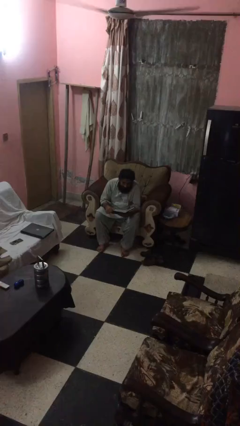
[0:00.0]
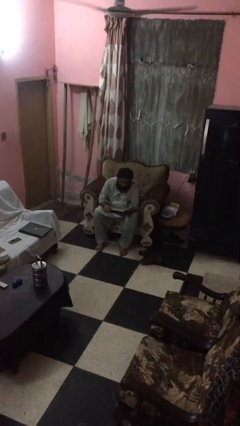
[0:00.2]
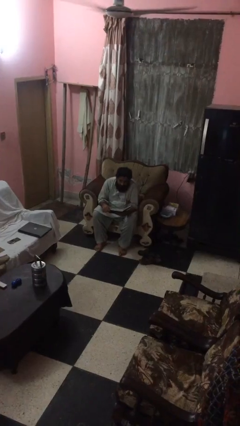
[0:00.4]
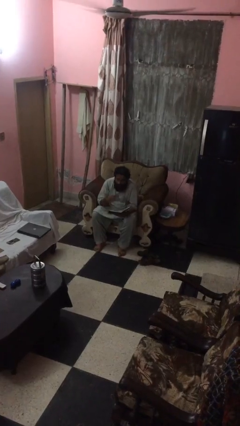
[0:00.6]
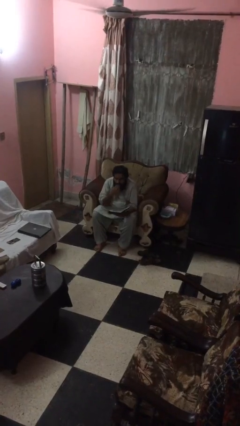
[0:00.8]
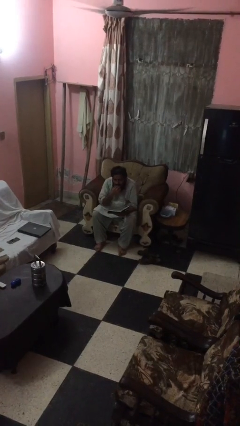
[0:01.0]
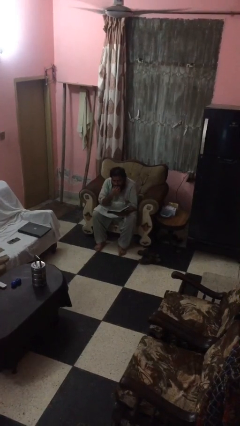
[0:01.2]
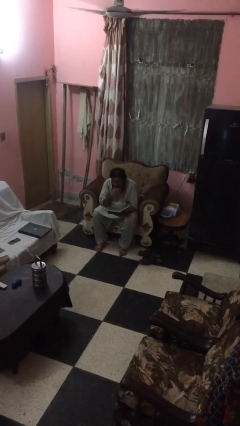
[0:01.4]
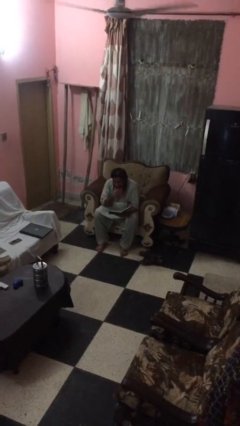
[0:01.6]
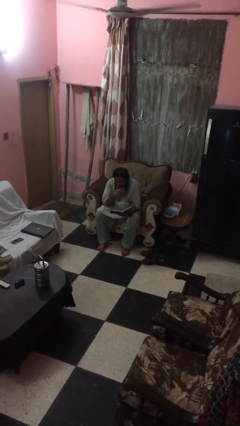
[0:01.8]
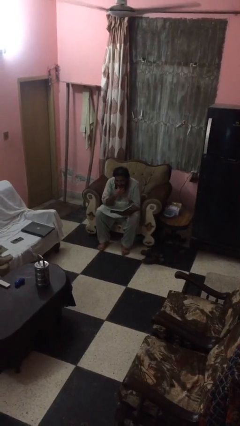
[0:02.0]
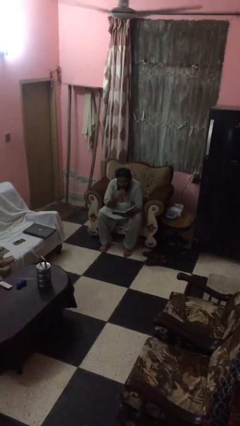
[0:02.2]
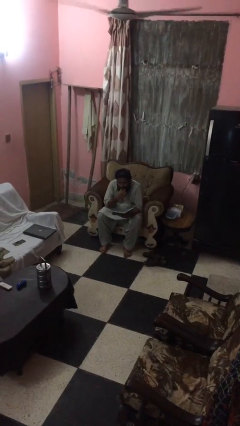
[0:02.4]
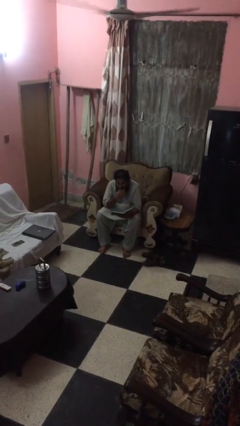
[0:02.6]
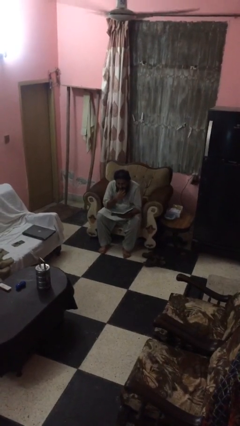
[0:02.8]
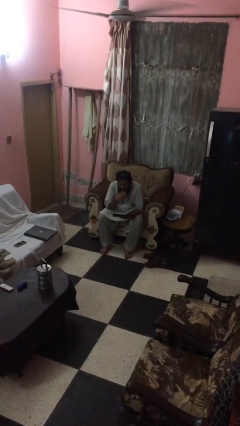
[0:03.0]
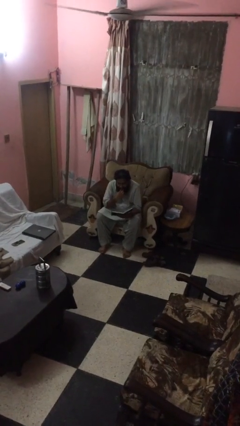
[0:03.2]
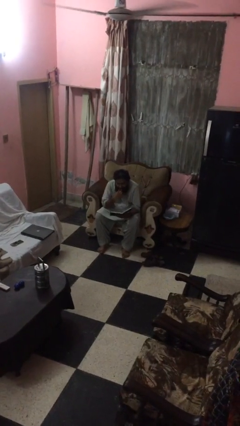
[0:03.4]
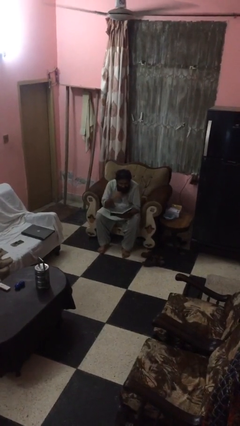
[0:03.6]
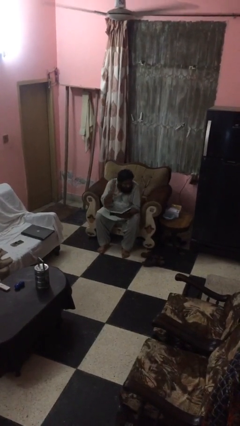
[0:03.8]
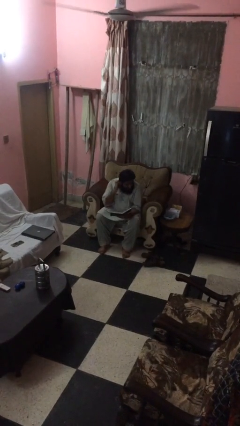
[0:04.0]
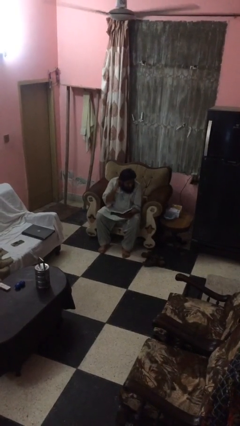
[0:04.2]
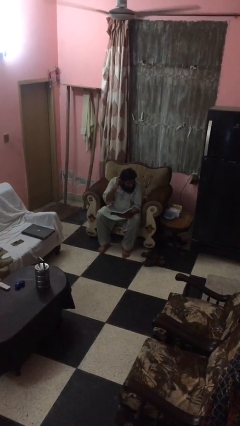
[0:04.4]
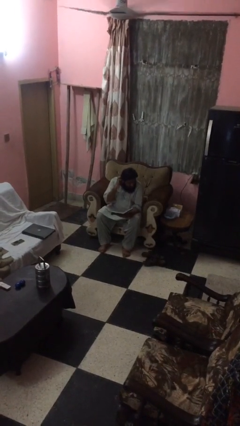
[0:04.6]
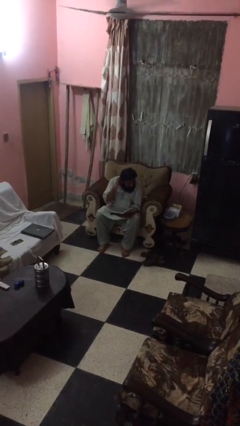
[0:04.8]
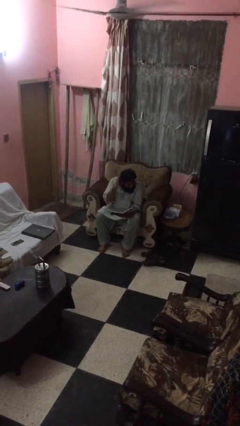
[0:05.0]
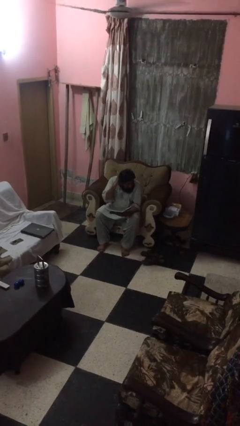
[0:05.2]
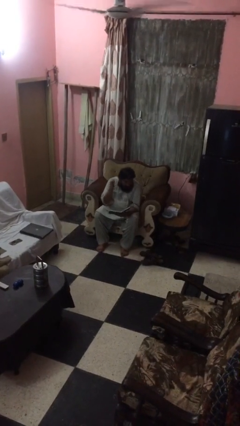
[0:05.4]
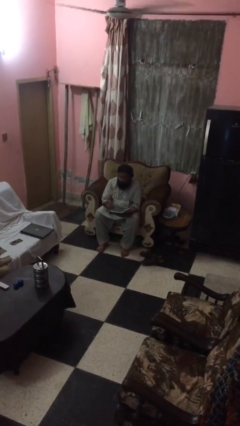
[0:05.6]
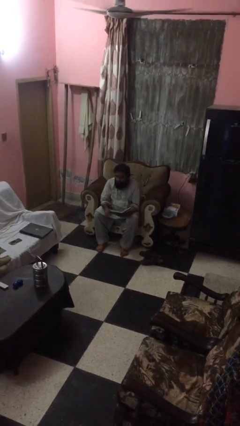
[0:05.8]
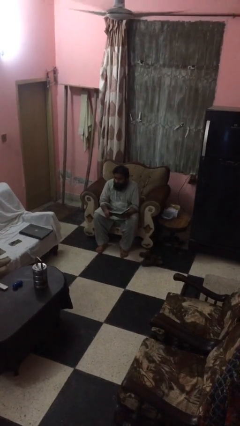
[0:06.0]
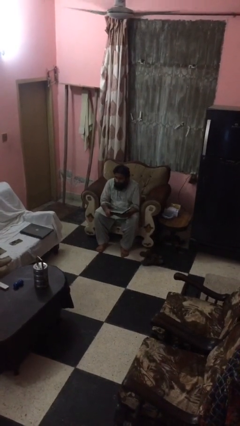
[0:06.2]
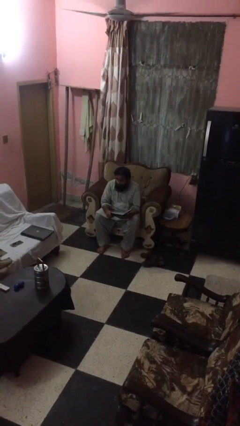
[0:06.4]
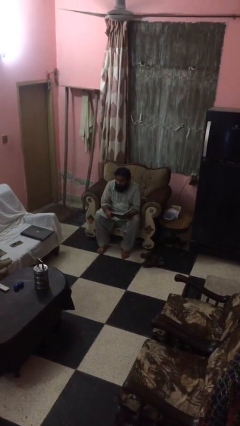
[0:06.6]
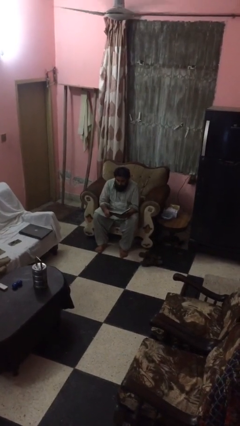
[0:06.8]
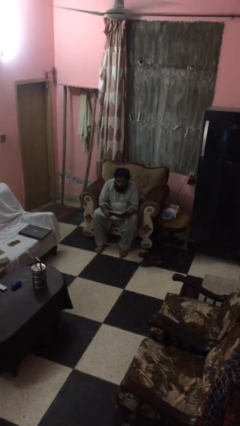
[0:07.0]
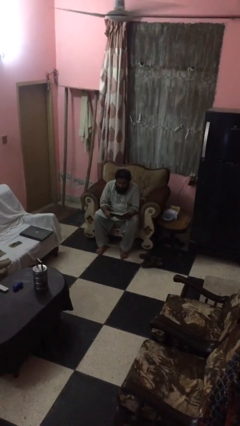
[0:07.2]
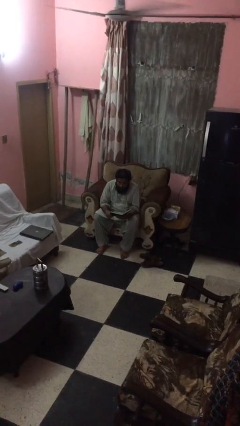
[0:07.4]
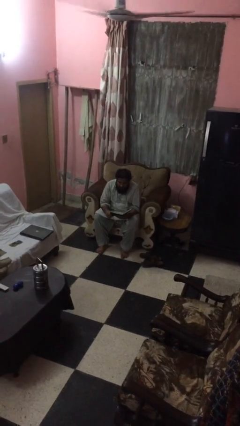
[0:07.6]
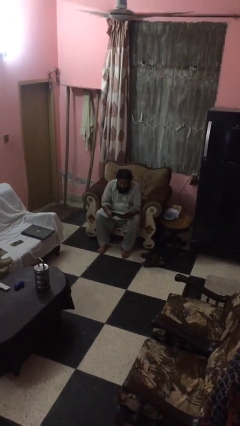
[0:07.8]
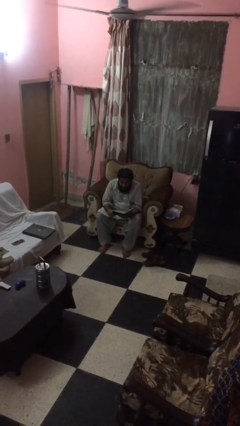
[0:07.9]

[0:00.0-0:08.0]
person reads document

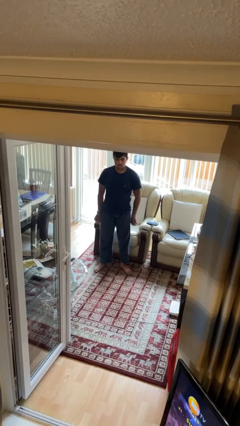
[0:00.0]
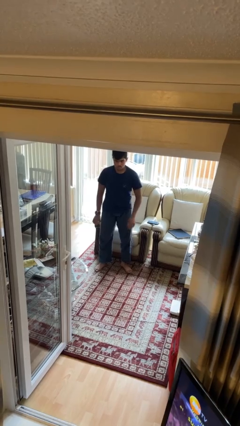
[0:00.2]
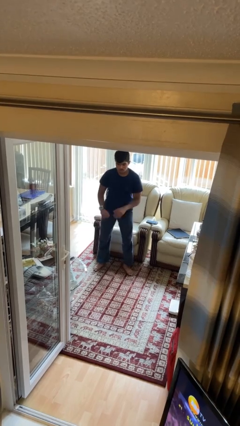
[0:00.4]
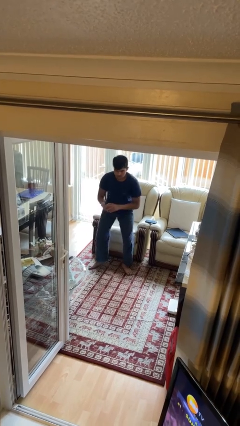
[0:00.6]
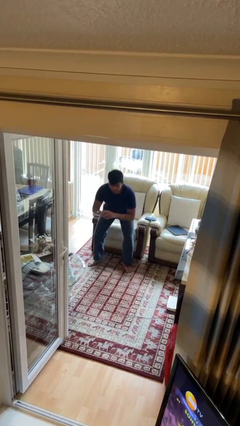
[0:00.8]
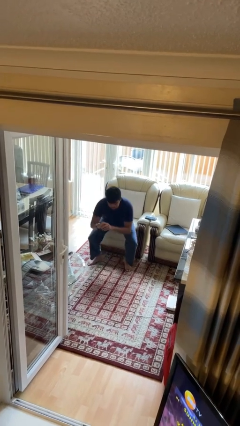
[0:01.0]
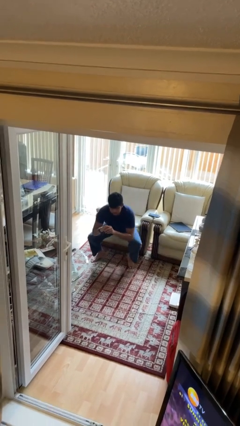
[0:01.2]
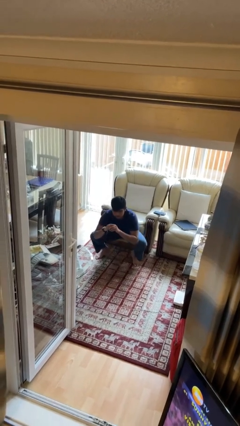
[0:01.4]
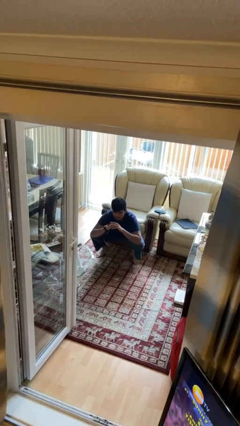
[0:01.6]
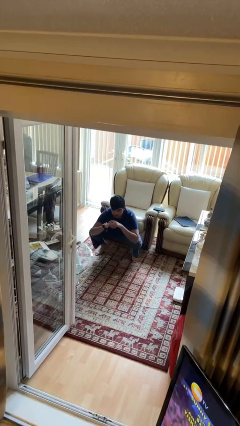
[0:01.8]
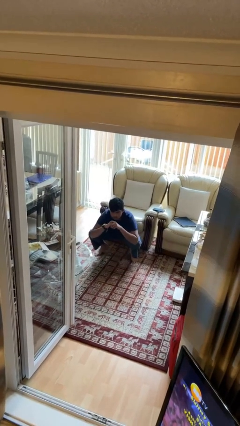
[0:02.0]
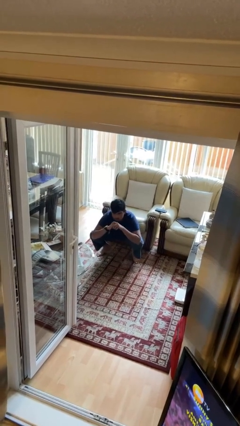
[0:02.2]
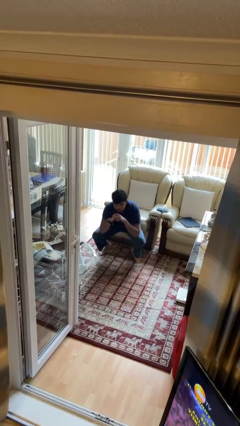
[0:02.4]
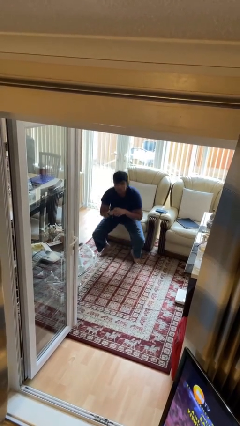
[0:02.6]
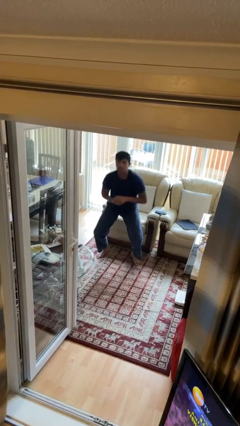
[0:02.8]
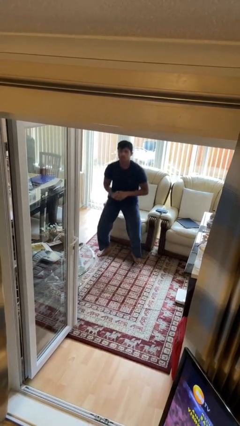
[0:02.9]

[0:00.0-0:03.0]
person squats

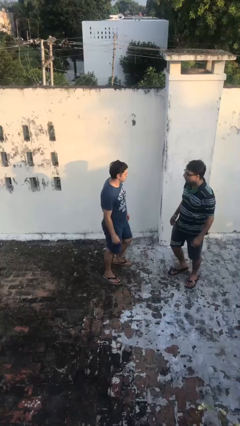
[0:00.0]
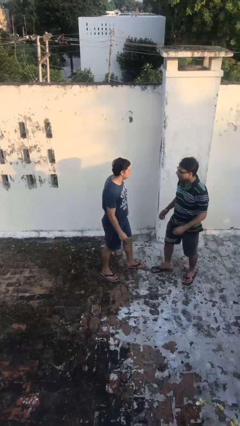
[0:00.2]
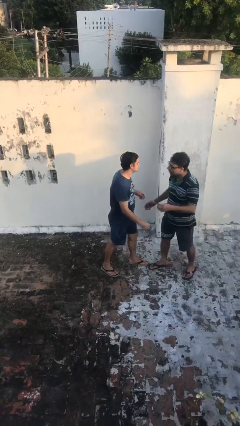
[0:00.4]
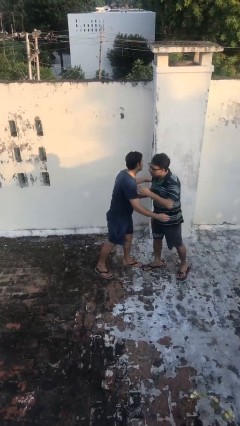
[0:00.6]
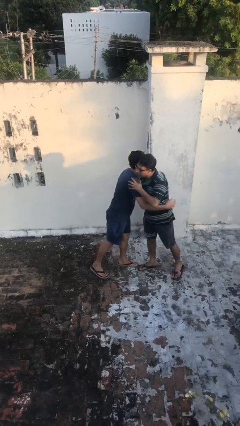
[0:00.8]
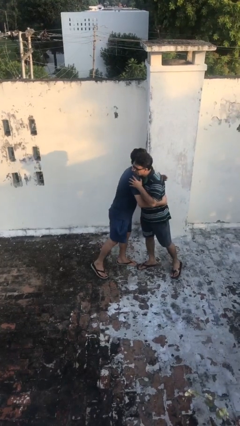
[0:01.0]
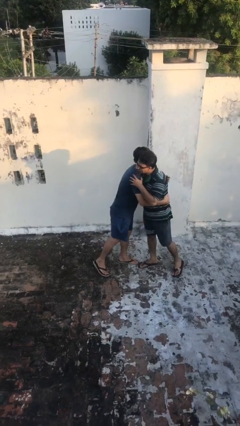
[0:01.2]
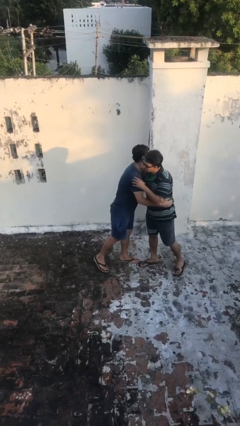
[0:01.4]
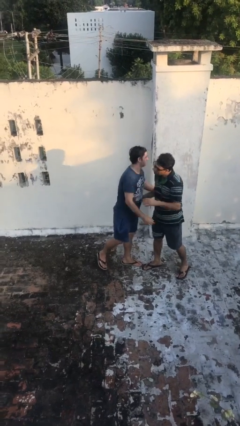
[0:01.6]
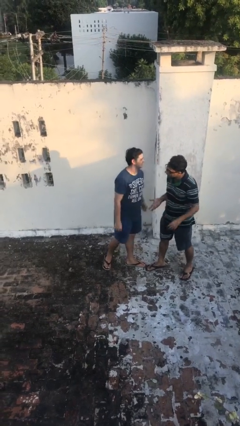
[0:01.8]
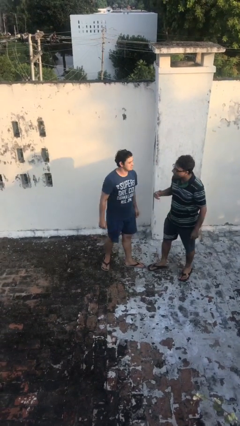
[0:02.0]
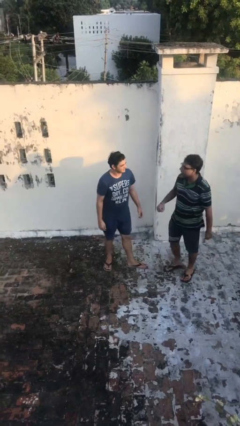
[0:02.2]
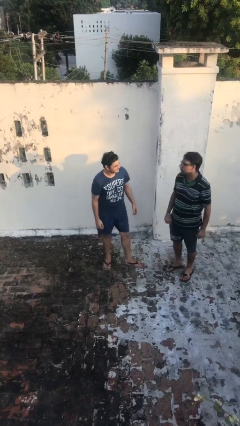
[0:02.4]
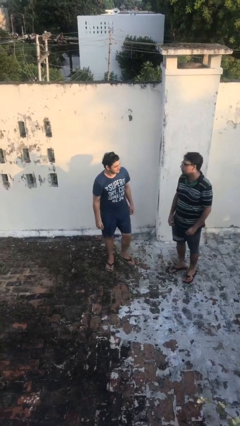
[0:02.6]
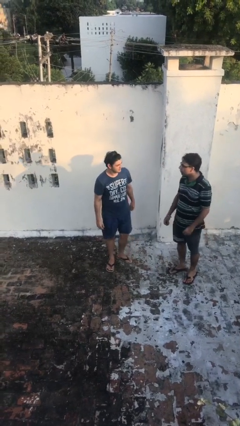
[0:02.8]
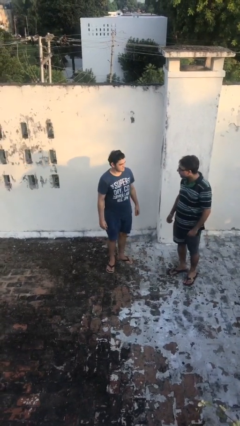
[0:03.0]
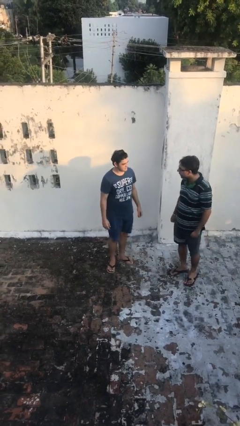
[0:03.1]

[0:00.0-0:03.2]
person embraces person

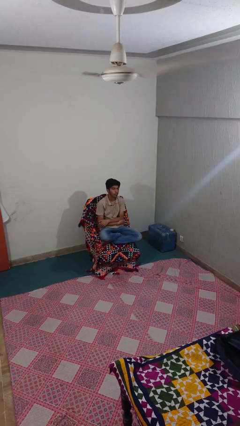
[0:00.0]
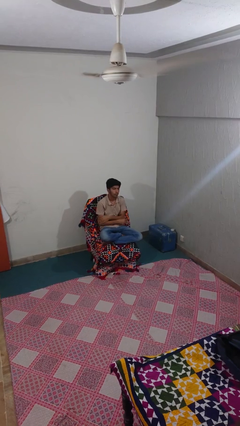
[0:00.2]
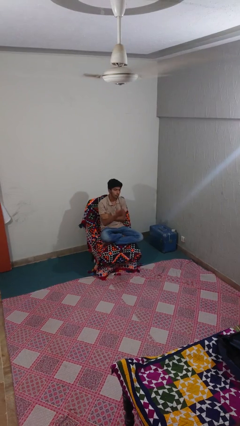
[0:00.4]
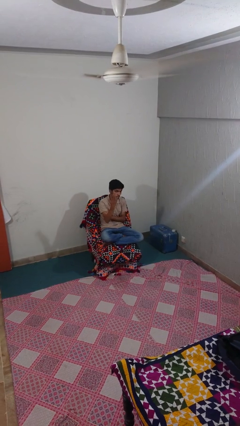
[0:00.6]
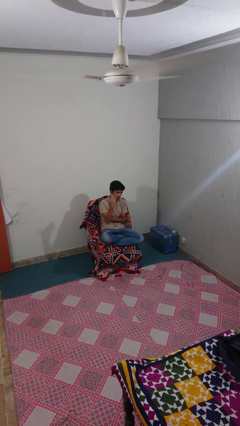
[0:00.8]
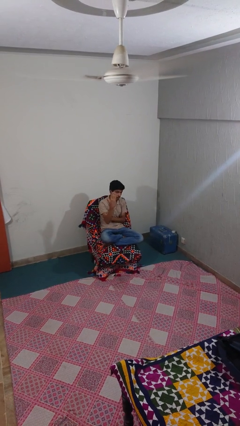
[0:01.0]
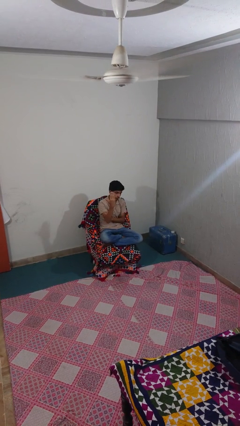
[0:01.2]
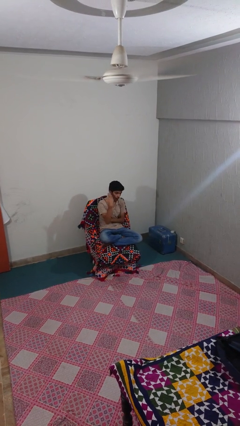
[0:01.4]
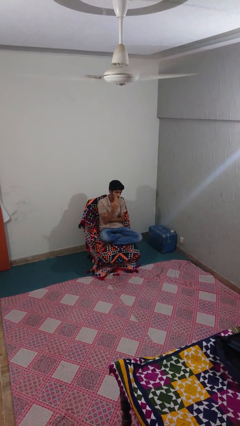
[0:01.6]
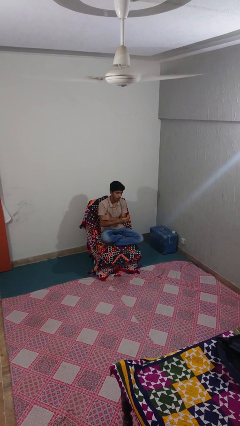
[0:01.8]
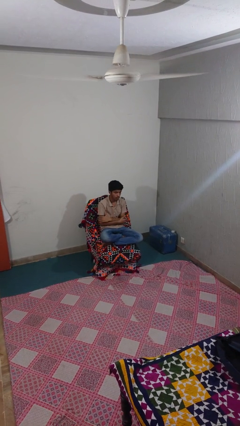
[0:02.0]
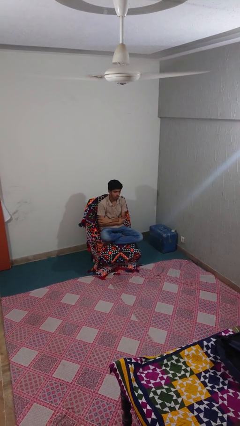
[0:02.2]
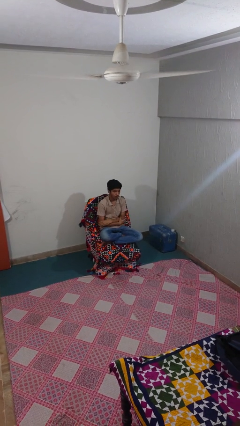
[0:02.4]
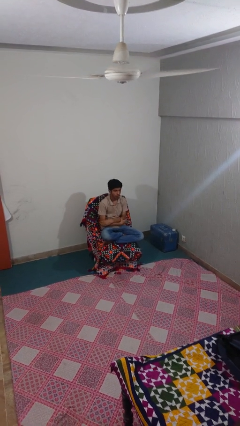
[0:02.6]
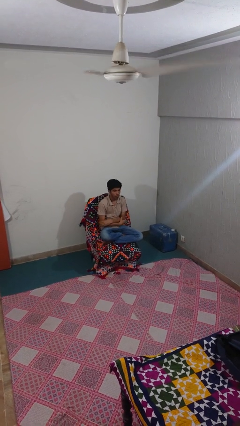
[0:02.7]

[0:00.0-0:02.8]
person gestures come here

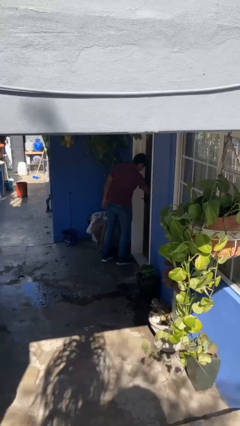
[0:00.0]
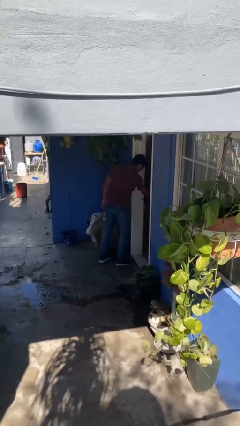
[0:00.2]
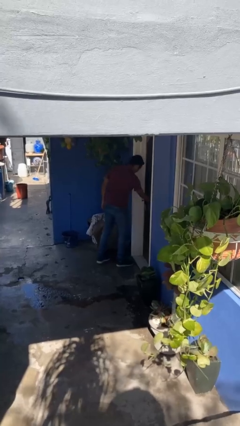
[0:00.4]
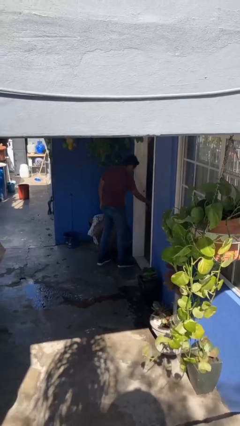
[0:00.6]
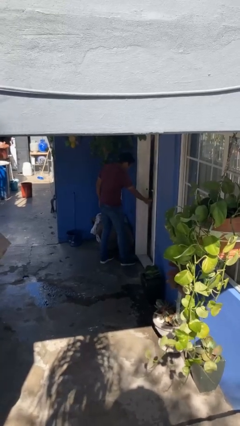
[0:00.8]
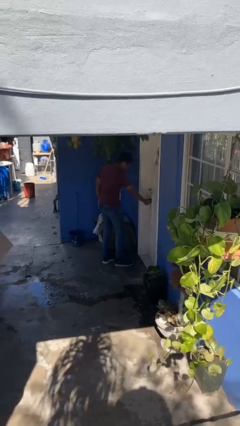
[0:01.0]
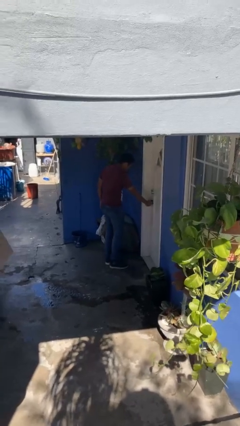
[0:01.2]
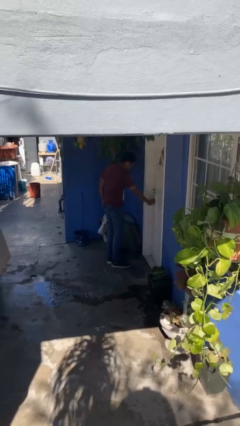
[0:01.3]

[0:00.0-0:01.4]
person closes facility door
